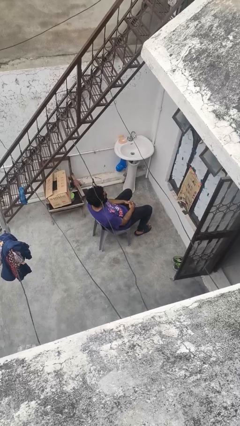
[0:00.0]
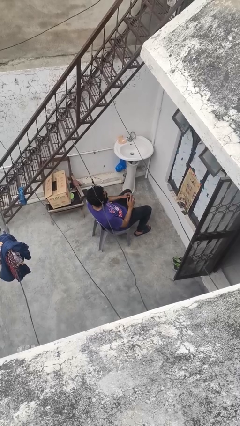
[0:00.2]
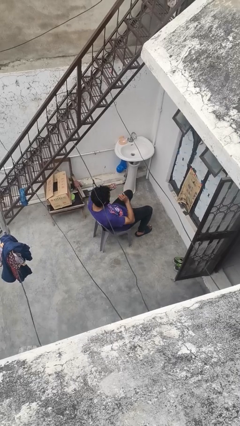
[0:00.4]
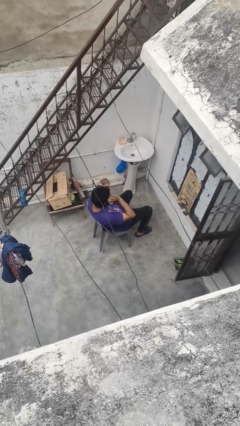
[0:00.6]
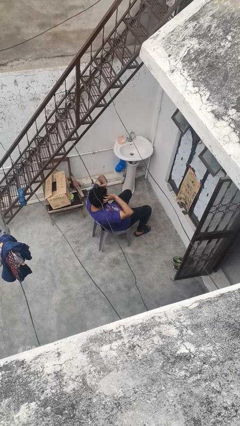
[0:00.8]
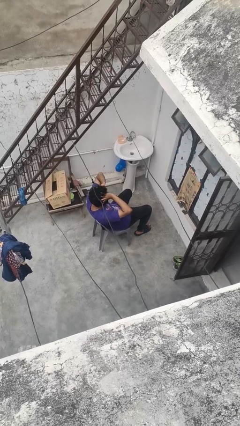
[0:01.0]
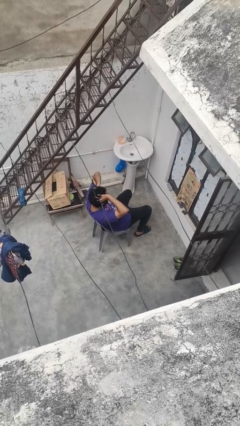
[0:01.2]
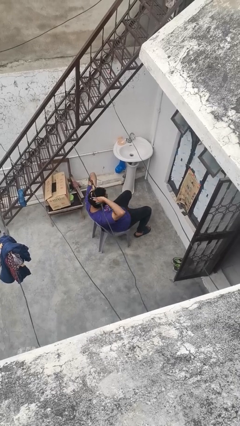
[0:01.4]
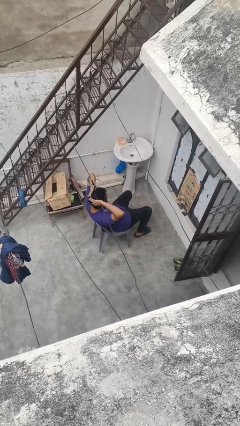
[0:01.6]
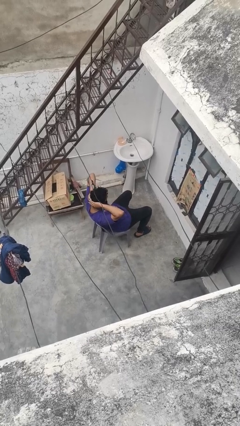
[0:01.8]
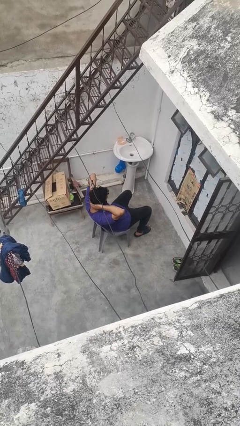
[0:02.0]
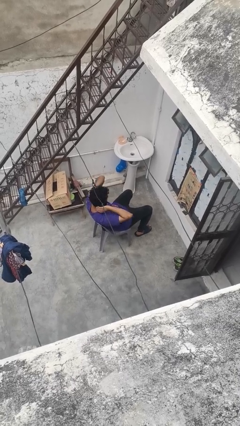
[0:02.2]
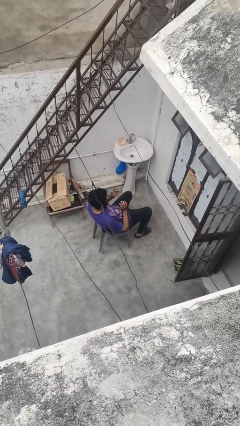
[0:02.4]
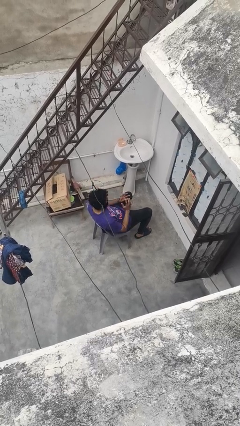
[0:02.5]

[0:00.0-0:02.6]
person strokes hair

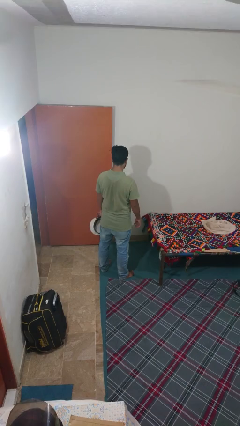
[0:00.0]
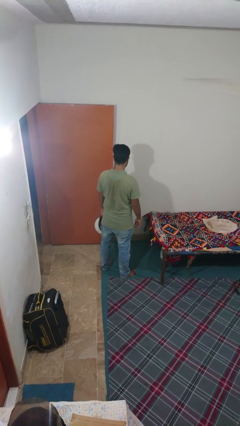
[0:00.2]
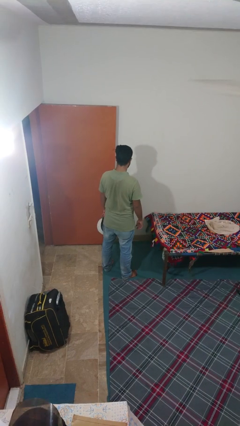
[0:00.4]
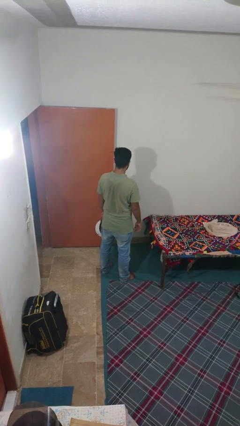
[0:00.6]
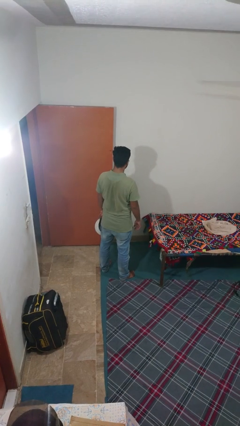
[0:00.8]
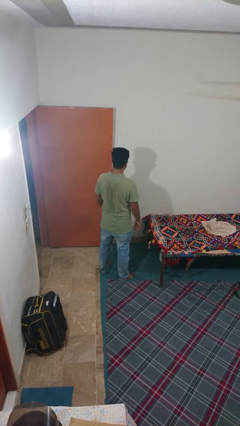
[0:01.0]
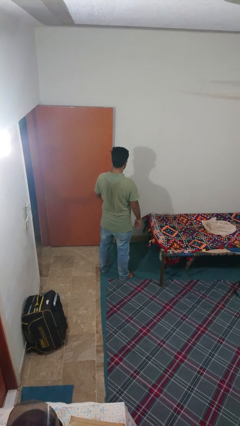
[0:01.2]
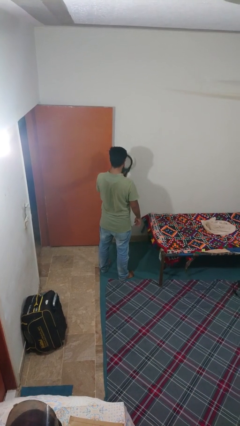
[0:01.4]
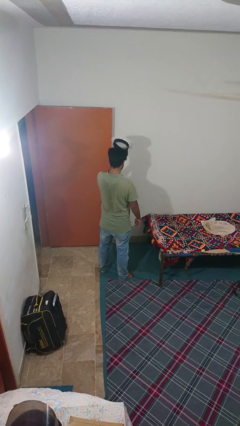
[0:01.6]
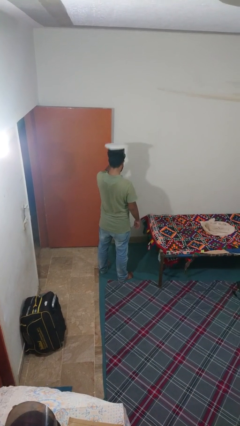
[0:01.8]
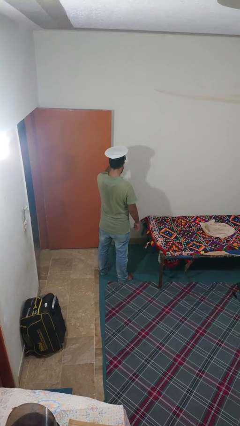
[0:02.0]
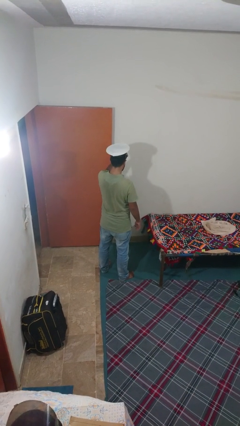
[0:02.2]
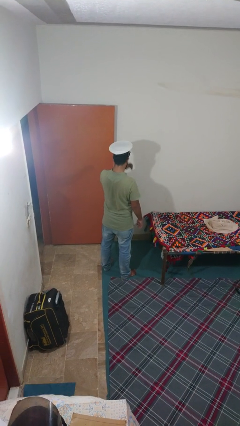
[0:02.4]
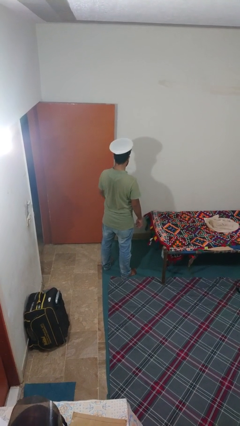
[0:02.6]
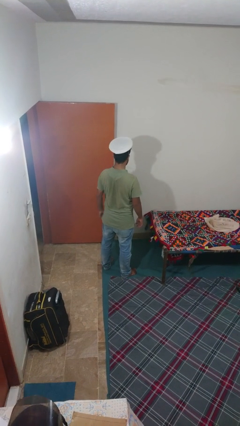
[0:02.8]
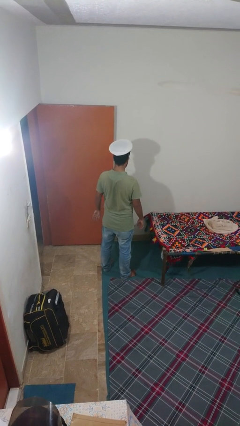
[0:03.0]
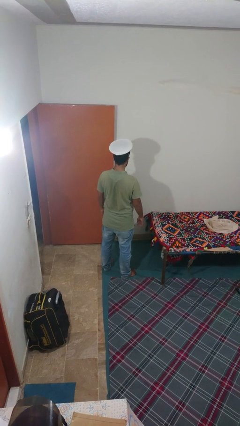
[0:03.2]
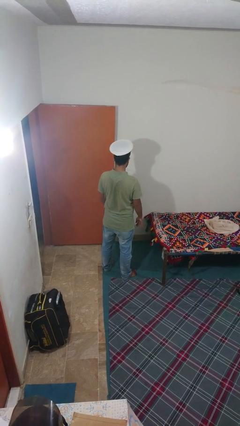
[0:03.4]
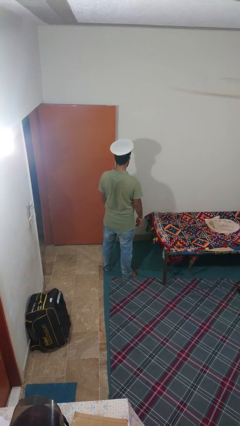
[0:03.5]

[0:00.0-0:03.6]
person puts on hat

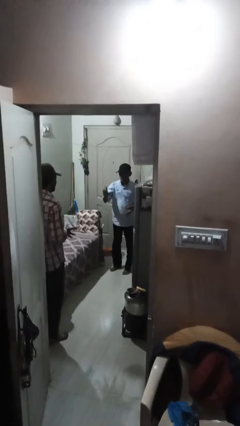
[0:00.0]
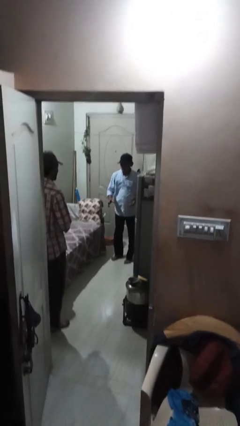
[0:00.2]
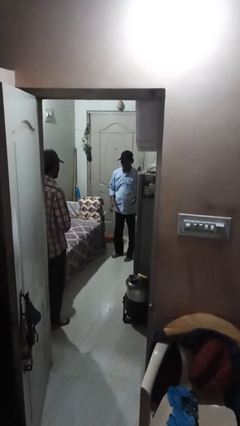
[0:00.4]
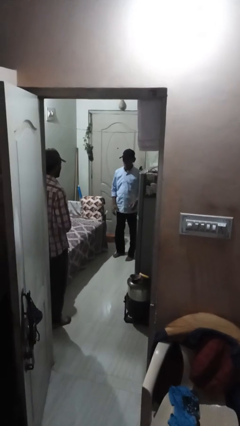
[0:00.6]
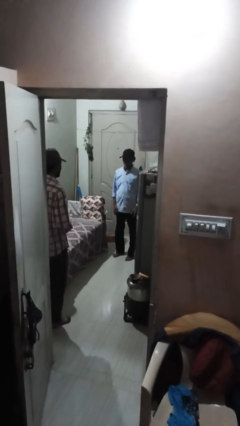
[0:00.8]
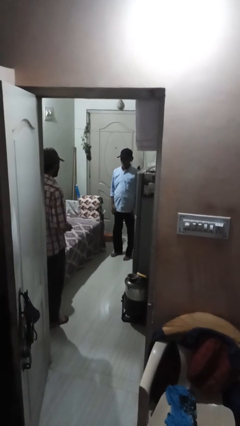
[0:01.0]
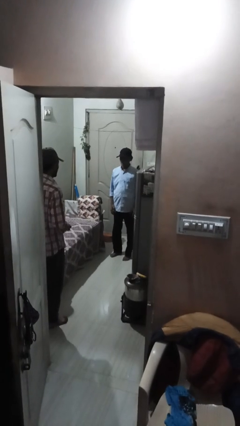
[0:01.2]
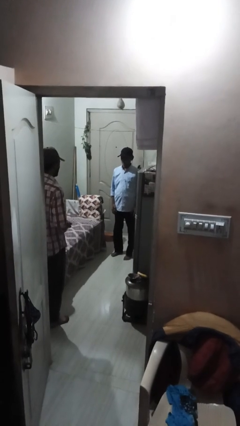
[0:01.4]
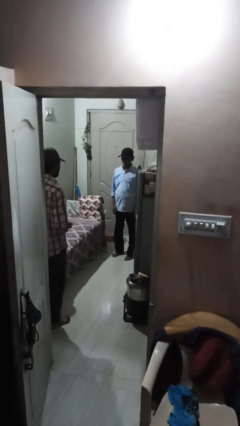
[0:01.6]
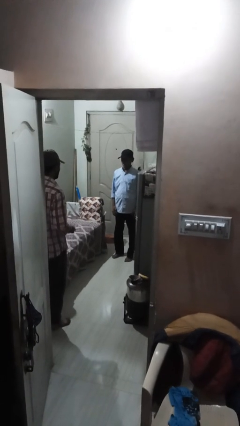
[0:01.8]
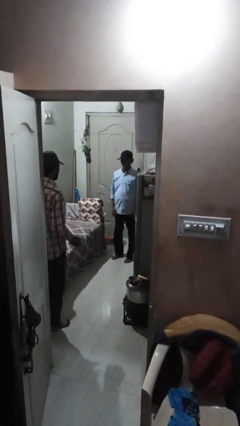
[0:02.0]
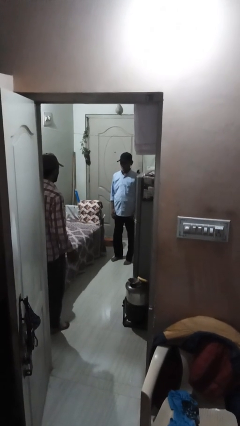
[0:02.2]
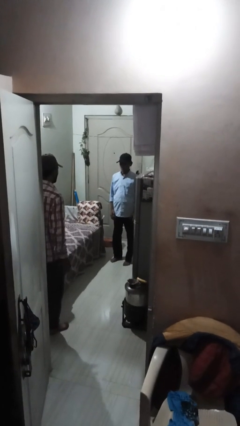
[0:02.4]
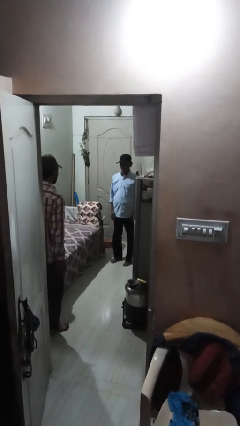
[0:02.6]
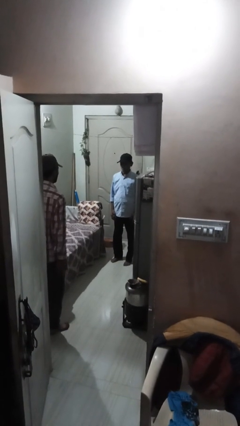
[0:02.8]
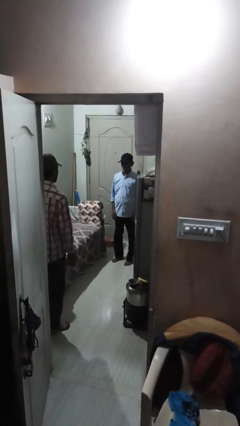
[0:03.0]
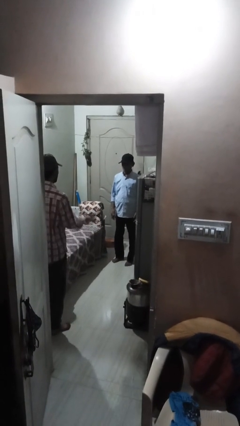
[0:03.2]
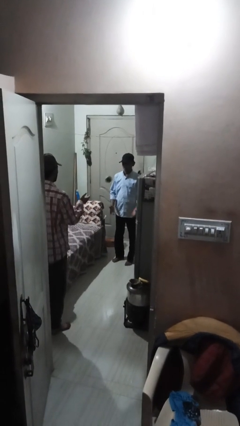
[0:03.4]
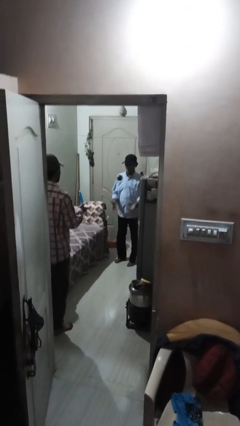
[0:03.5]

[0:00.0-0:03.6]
person throws object to person

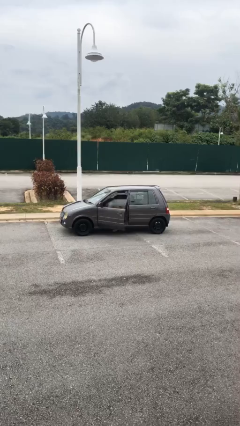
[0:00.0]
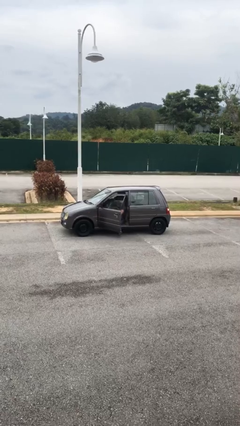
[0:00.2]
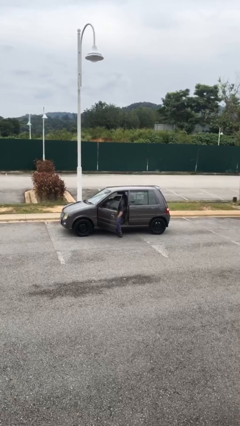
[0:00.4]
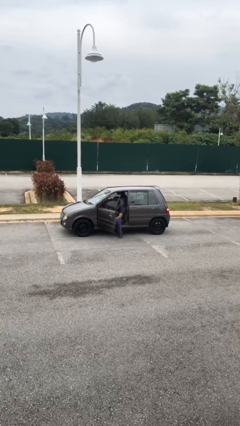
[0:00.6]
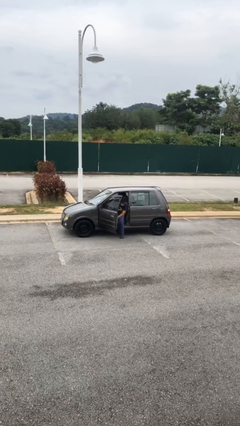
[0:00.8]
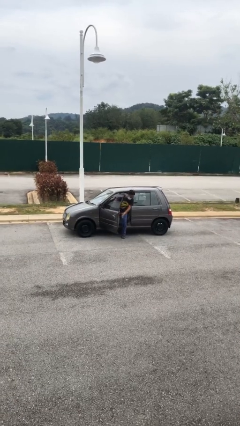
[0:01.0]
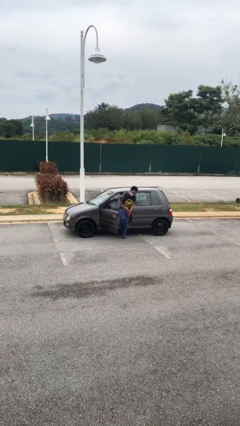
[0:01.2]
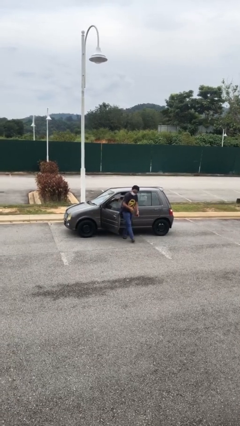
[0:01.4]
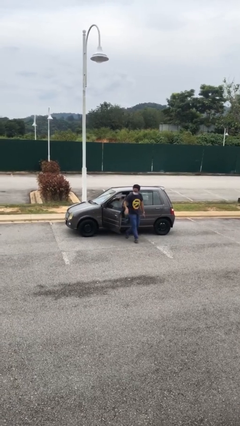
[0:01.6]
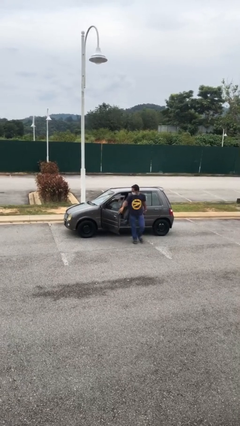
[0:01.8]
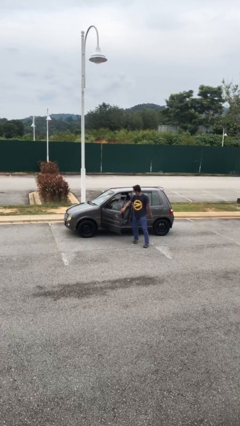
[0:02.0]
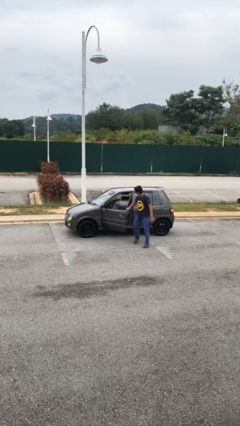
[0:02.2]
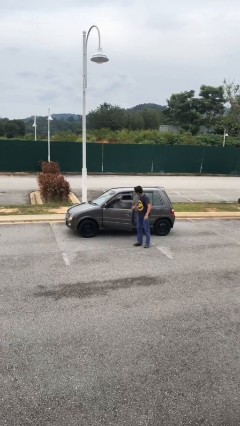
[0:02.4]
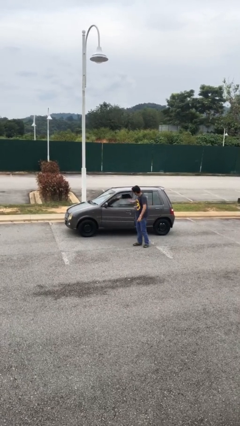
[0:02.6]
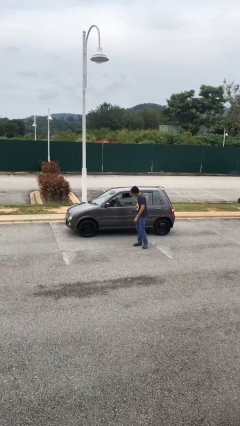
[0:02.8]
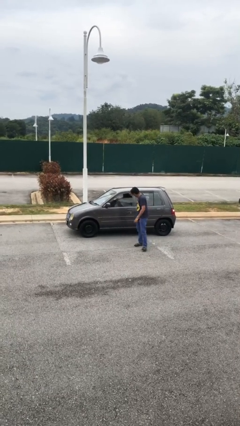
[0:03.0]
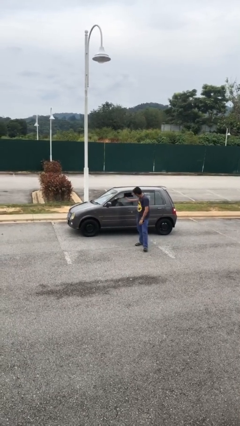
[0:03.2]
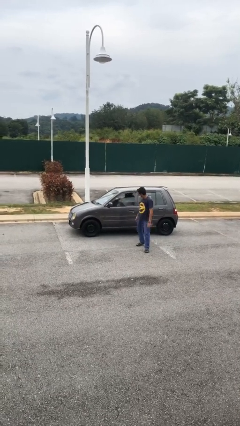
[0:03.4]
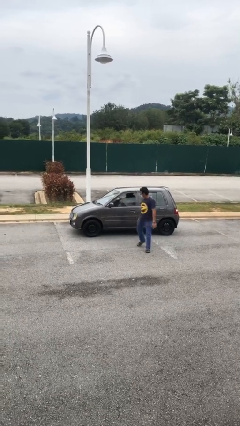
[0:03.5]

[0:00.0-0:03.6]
car drops off person

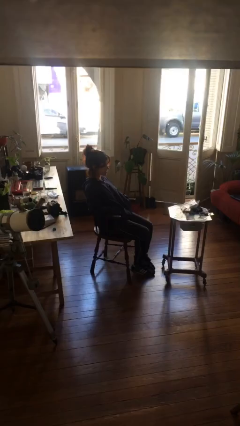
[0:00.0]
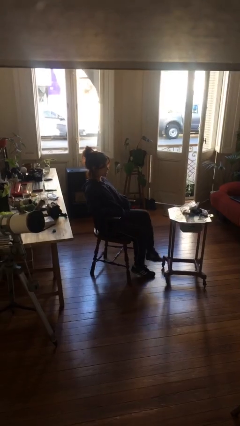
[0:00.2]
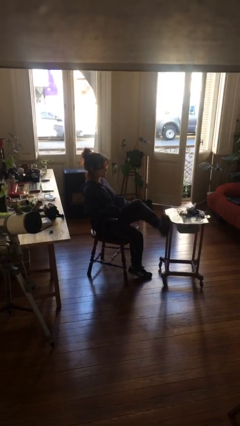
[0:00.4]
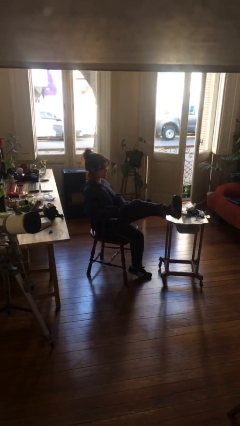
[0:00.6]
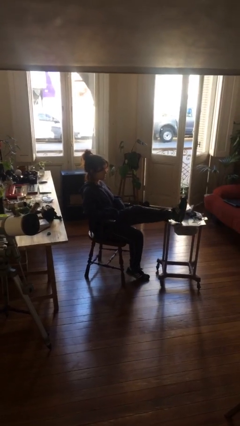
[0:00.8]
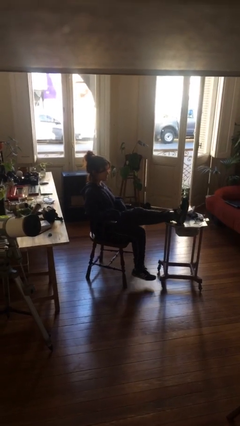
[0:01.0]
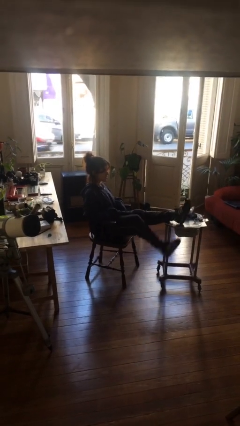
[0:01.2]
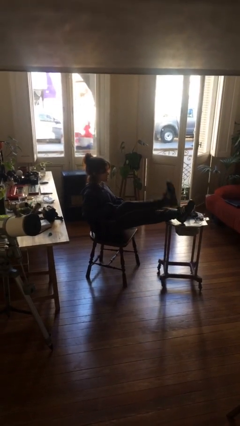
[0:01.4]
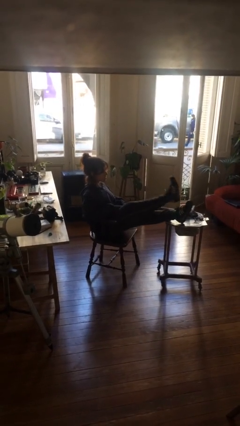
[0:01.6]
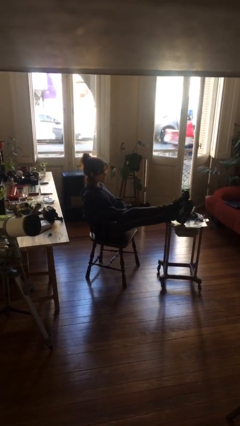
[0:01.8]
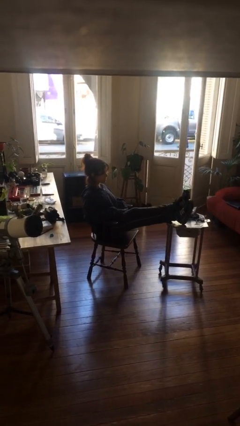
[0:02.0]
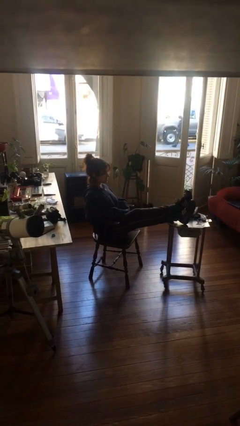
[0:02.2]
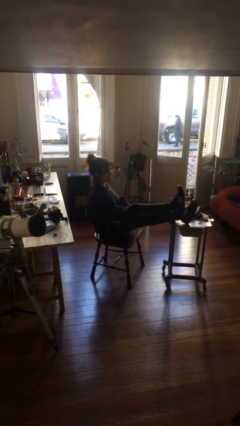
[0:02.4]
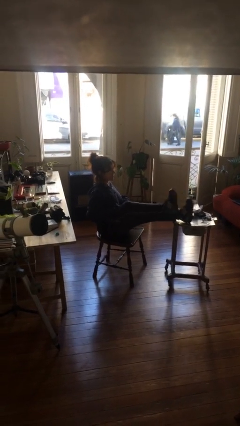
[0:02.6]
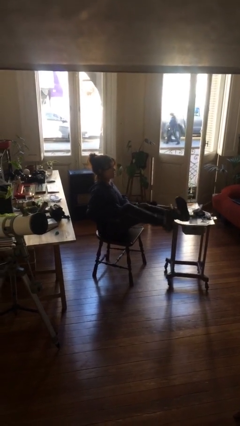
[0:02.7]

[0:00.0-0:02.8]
person puts feet up

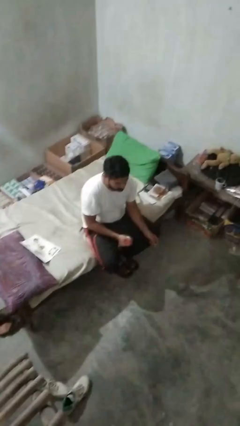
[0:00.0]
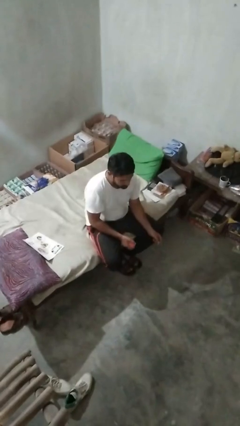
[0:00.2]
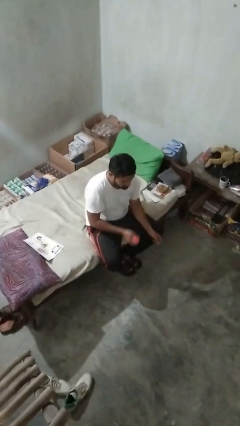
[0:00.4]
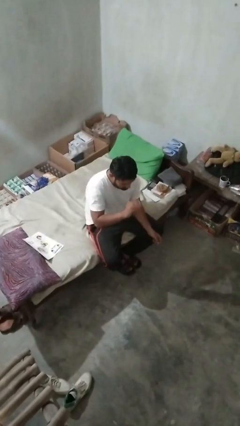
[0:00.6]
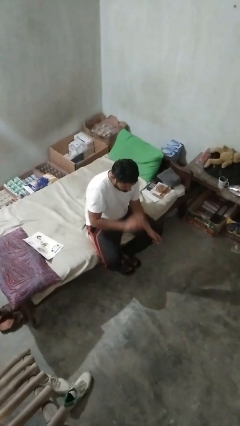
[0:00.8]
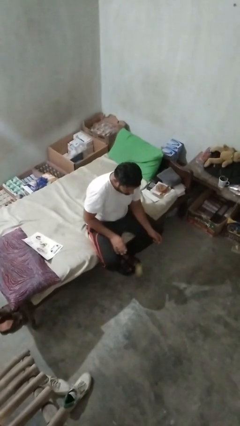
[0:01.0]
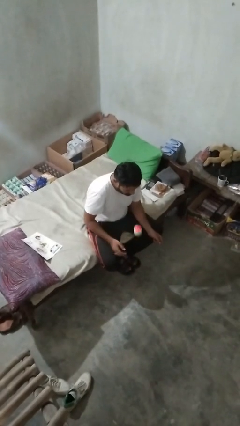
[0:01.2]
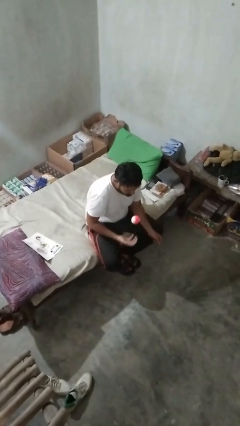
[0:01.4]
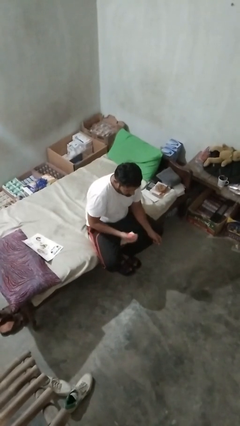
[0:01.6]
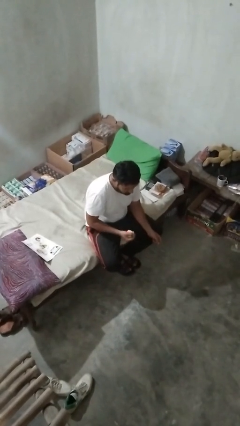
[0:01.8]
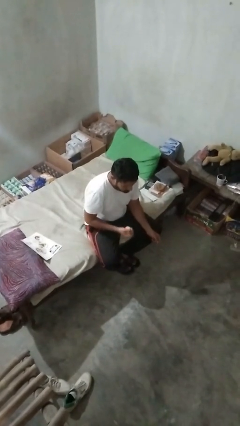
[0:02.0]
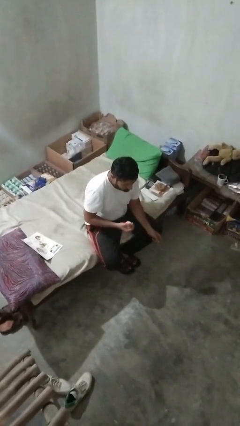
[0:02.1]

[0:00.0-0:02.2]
person bounces ball on floor
